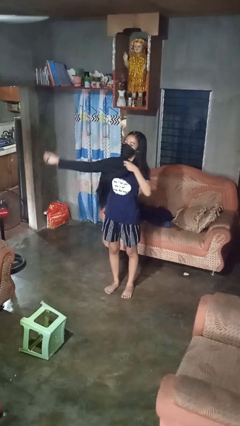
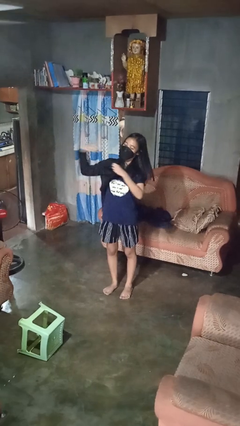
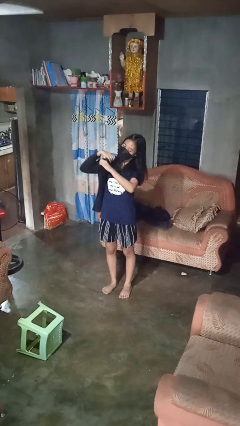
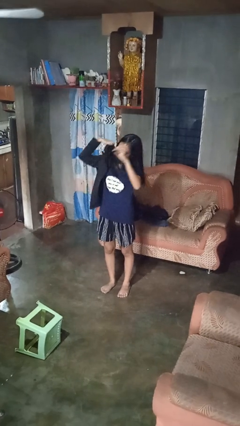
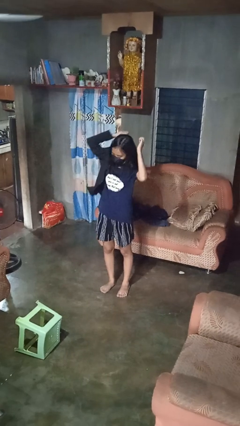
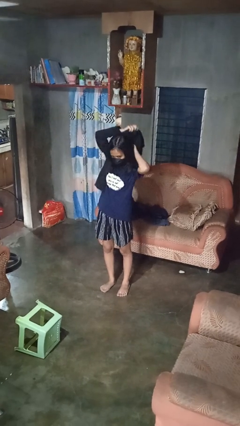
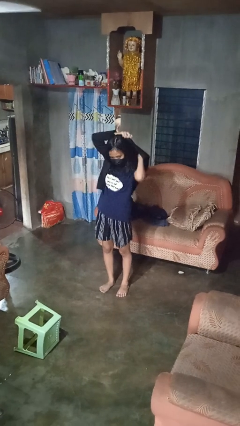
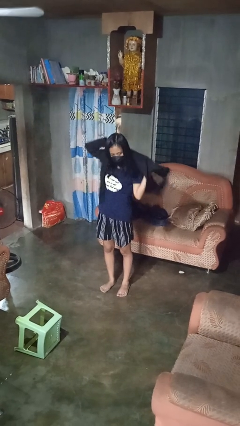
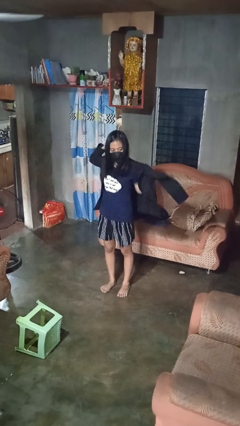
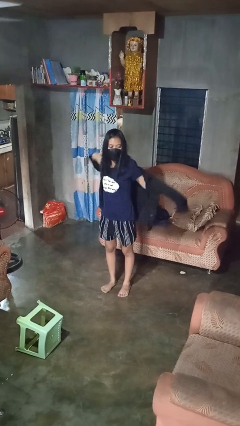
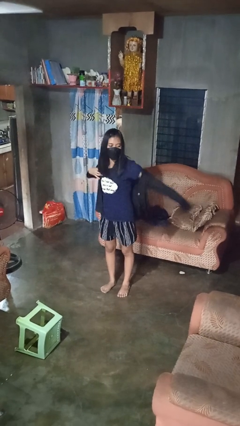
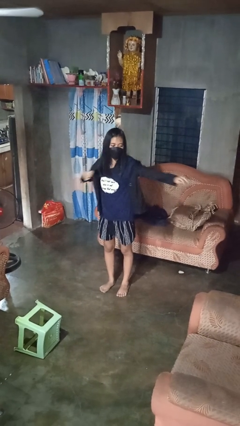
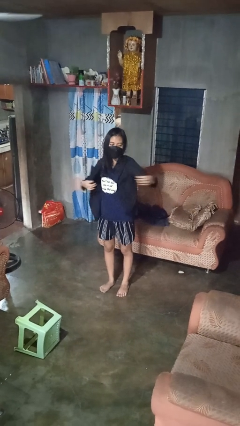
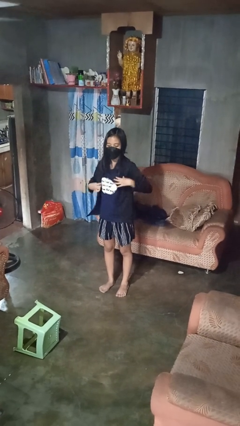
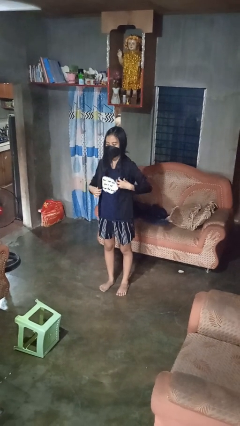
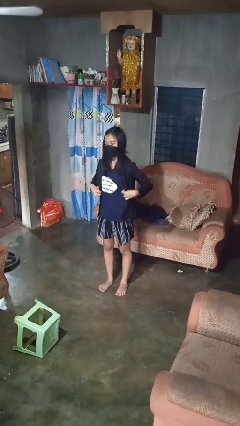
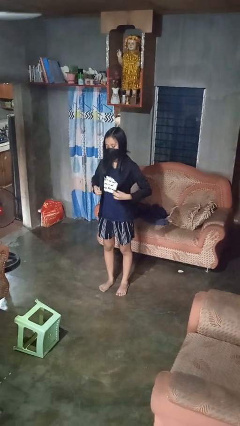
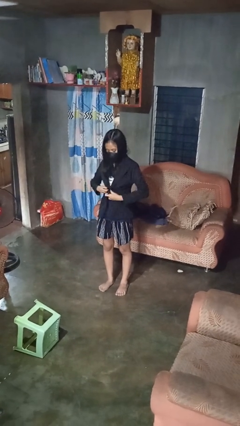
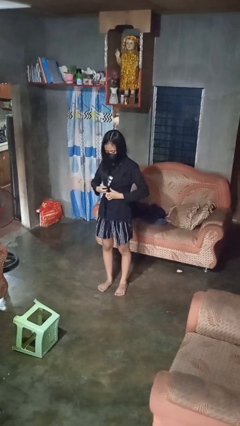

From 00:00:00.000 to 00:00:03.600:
person puts on shirt

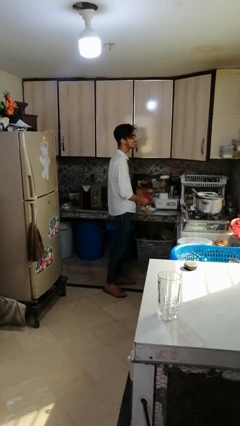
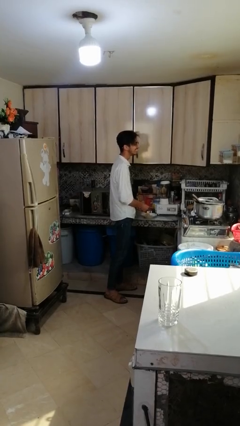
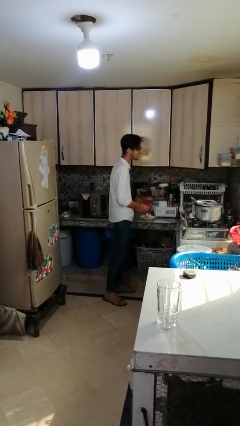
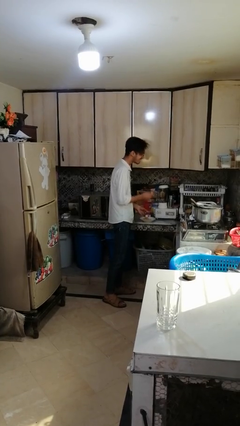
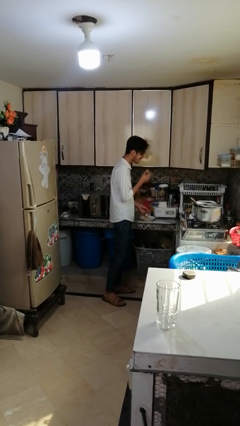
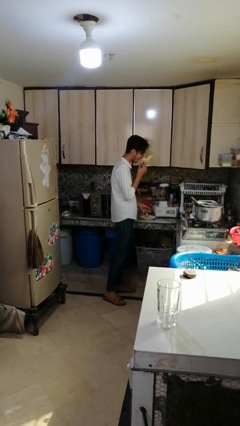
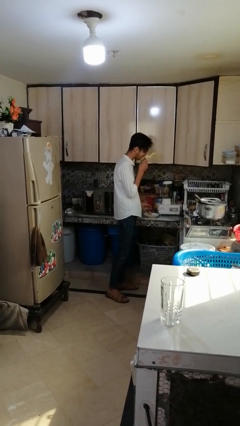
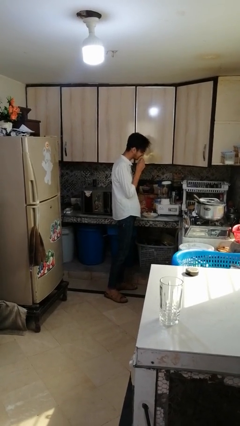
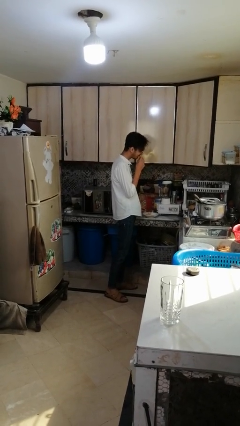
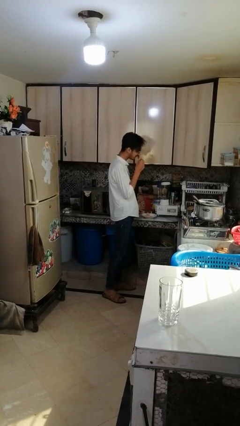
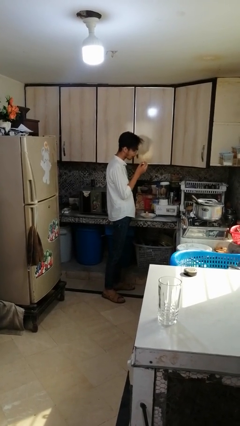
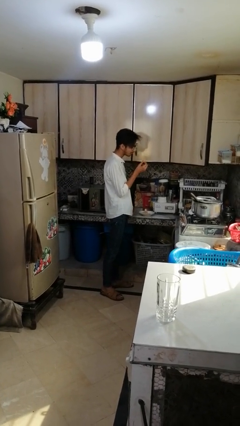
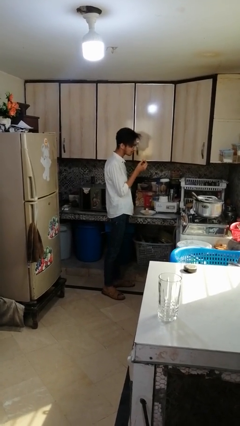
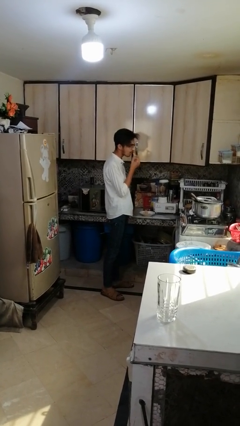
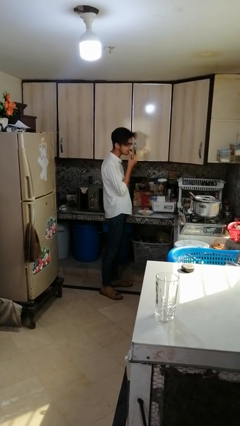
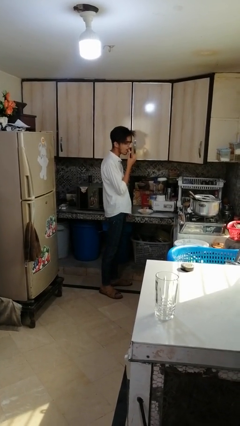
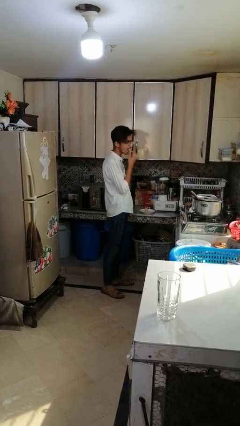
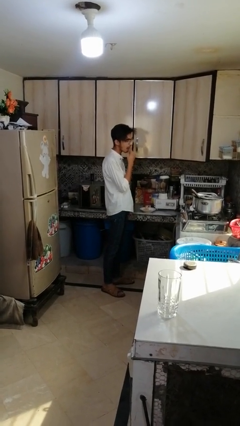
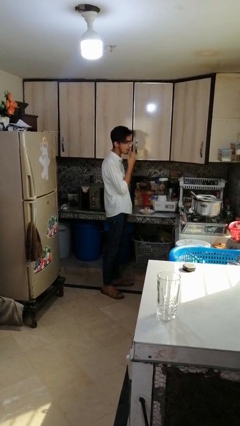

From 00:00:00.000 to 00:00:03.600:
person eats with hands

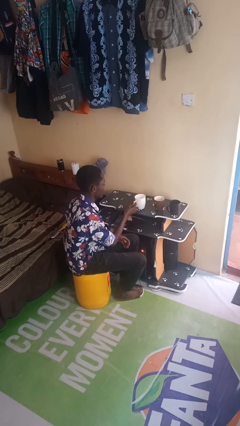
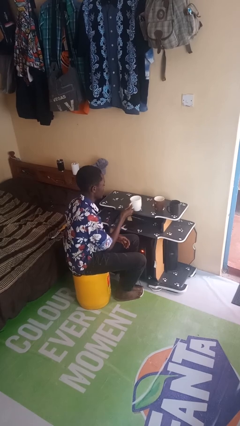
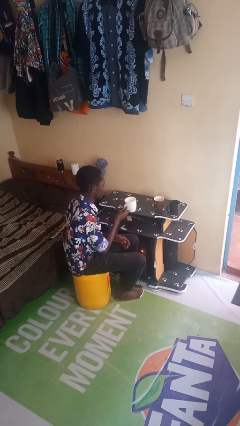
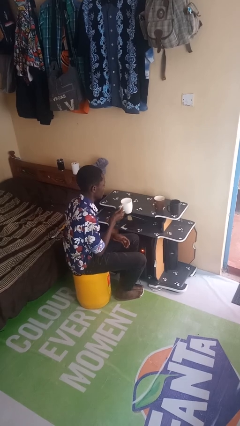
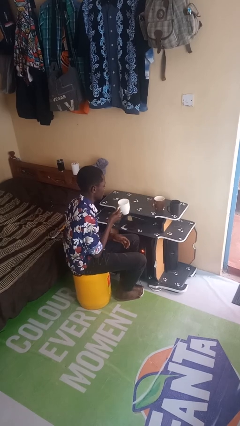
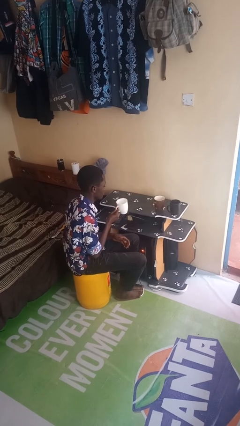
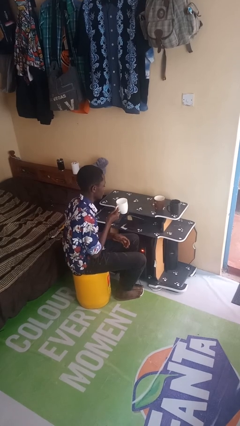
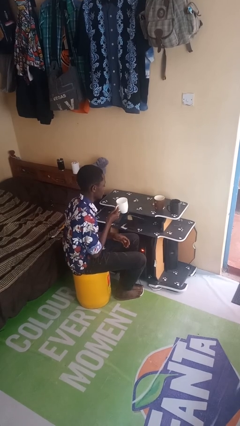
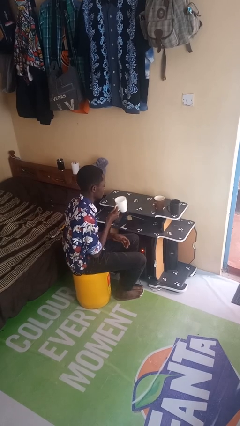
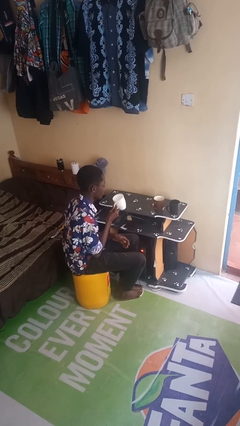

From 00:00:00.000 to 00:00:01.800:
person picks up object from table

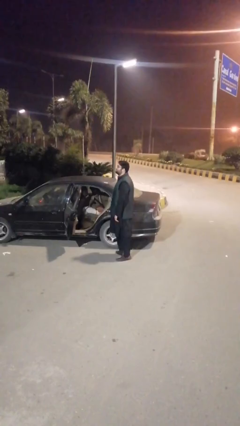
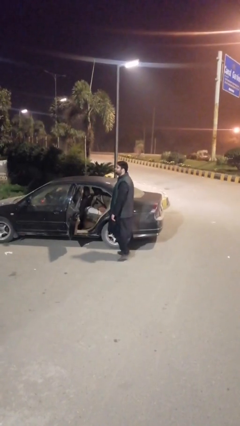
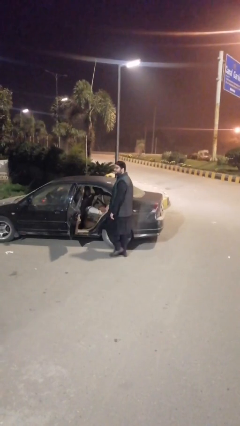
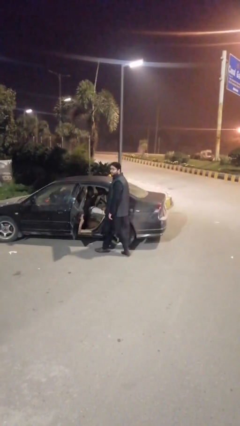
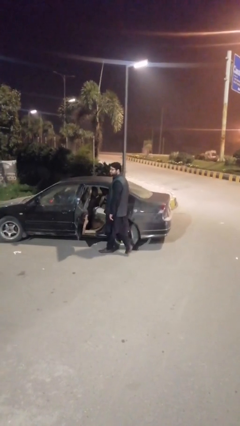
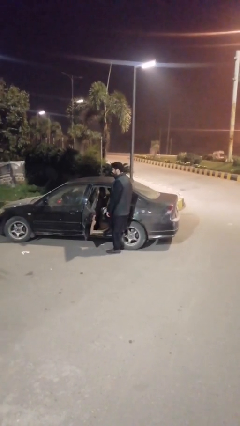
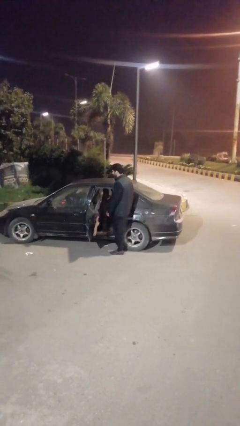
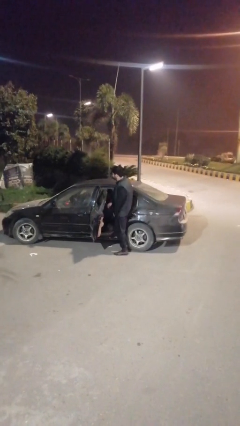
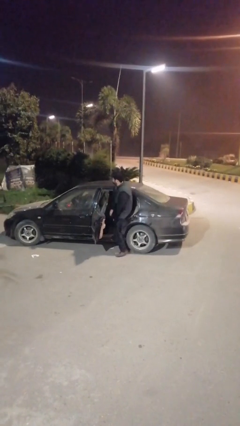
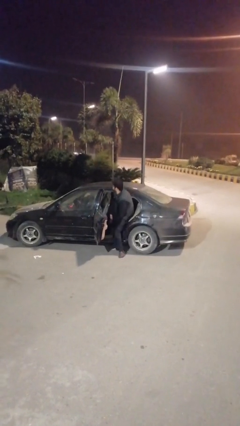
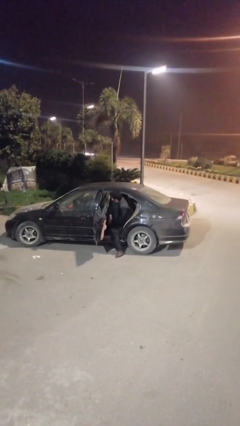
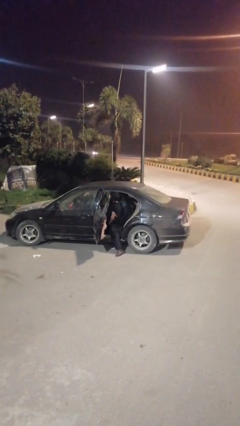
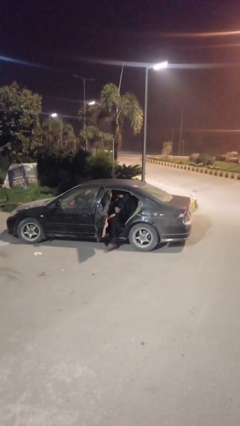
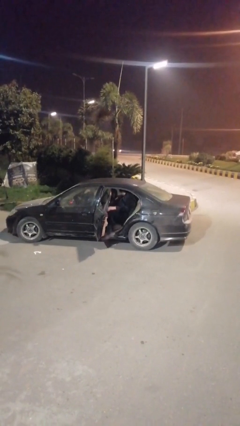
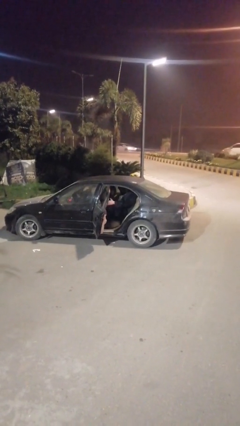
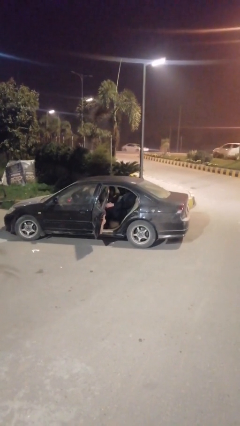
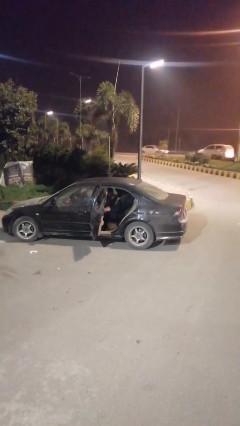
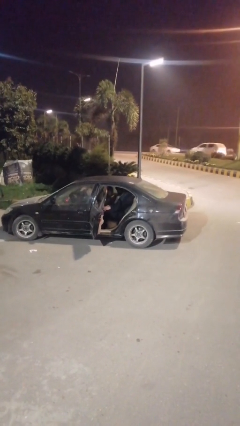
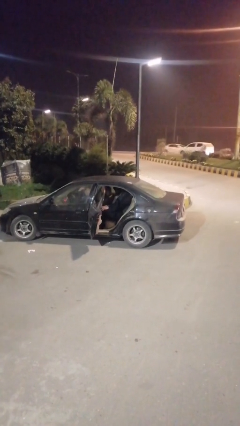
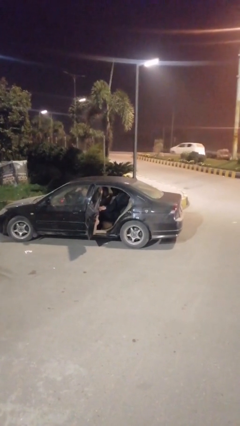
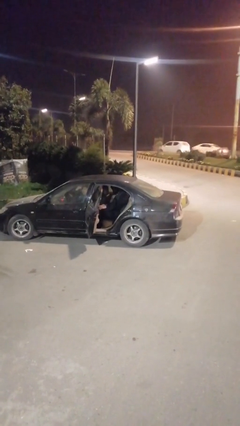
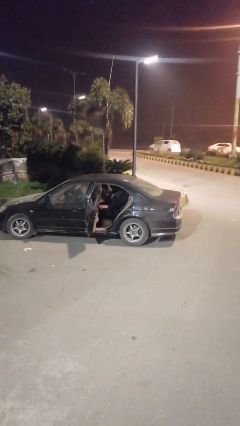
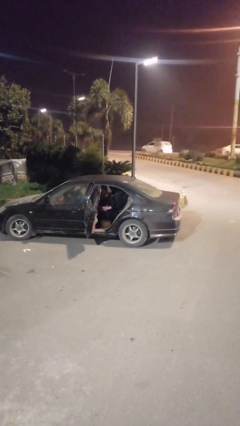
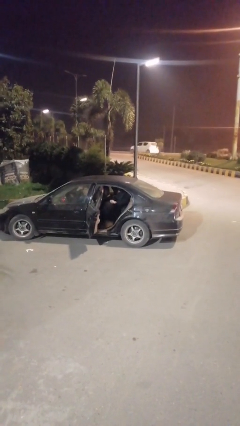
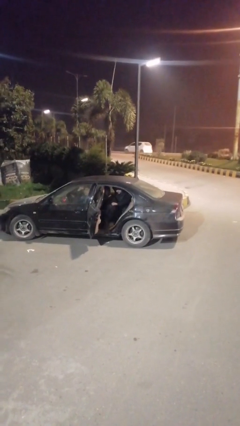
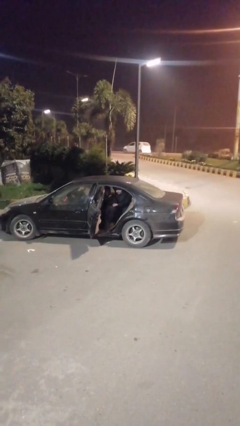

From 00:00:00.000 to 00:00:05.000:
person enters car

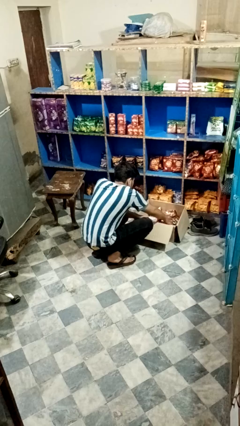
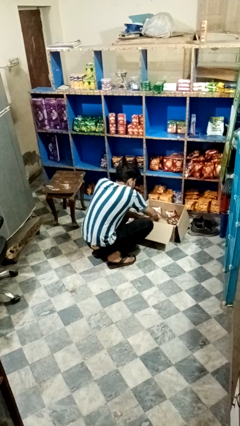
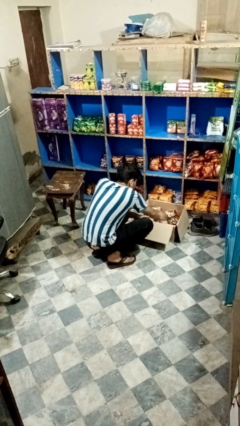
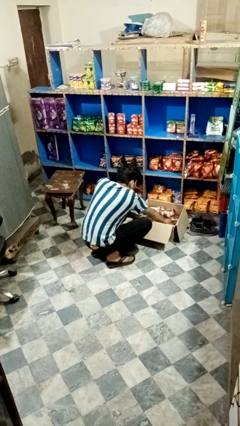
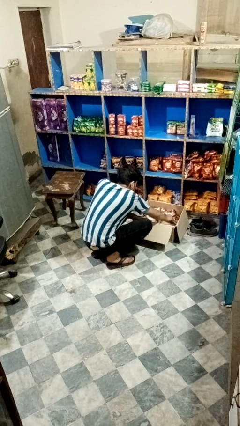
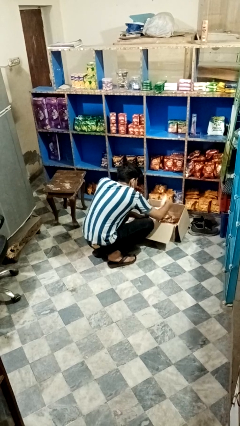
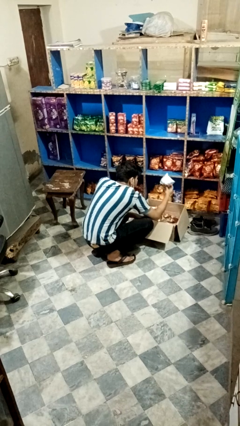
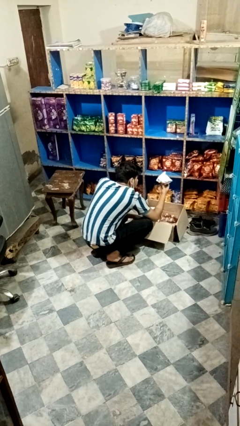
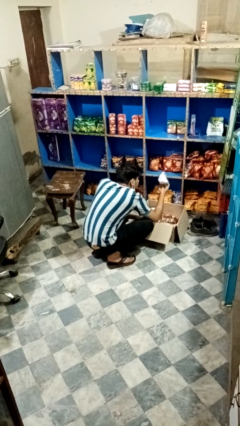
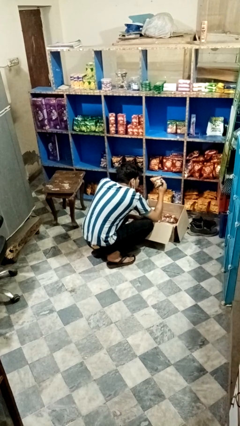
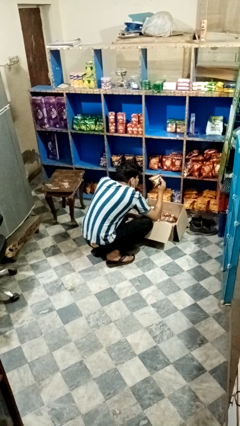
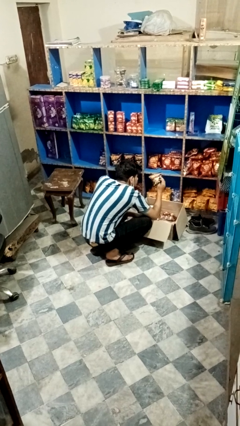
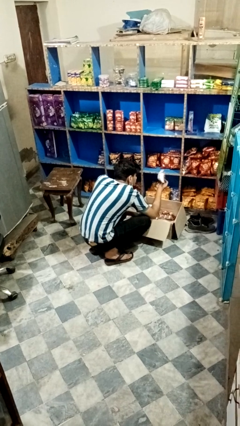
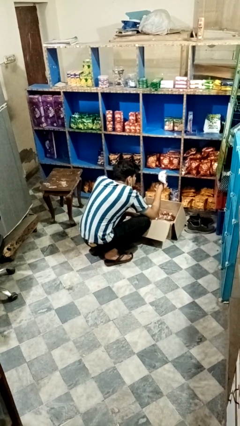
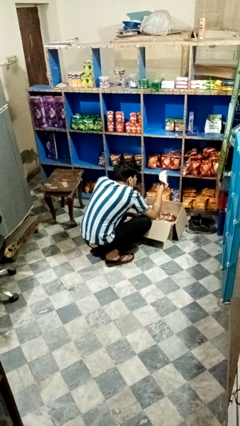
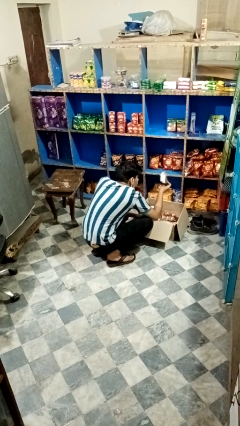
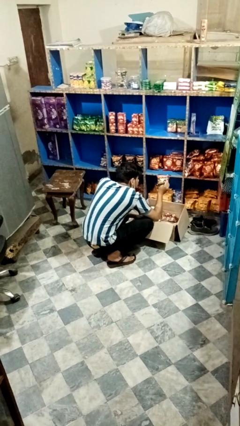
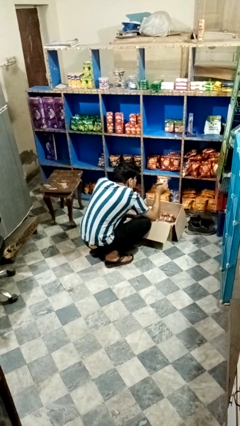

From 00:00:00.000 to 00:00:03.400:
person searches in box

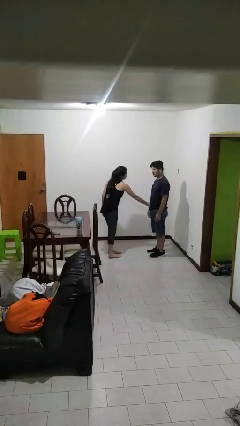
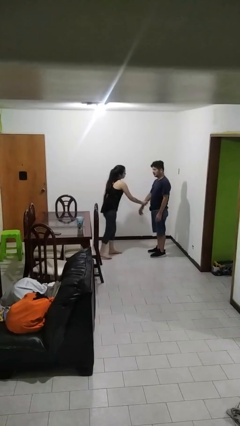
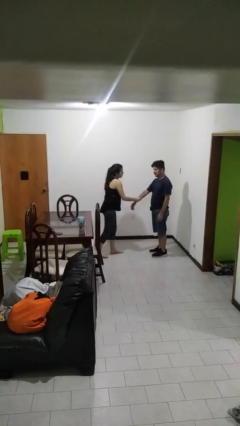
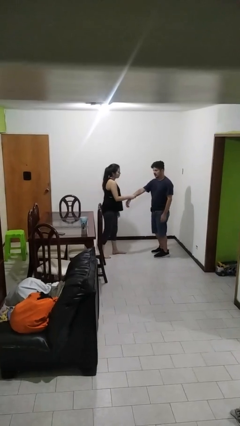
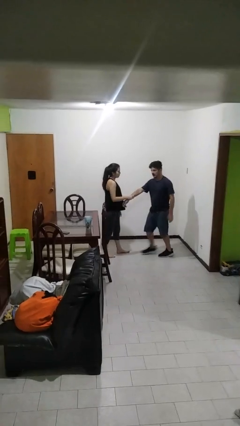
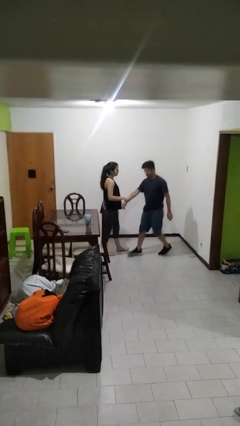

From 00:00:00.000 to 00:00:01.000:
person grabs person by forearm
